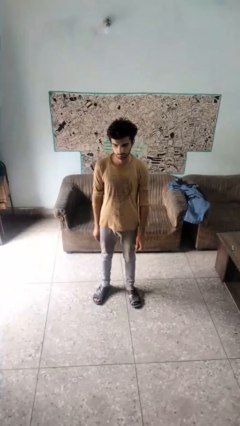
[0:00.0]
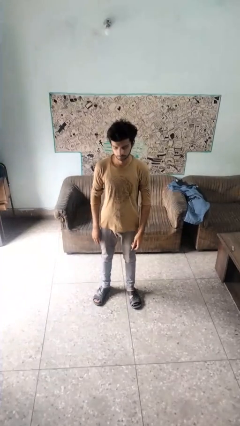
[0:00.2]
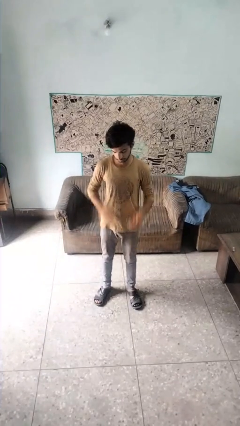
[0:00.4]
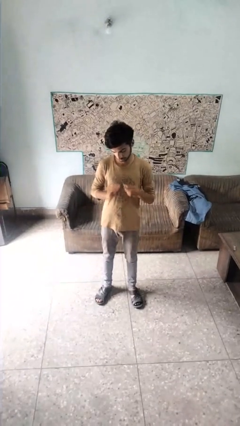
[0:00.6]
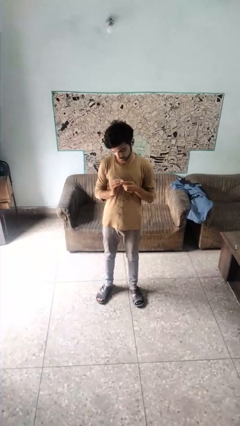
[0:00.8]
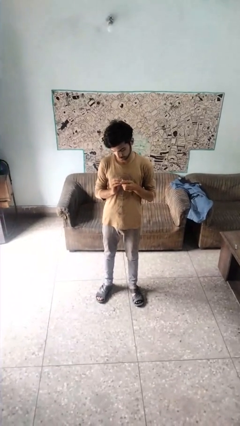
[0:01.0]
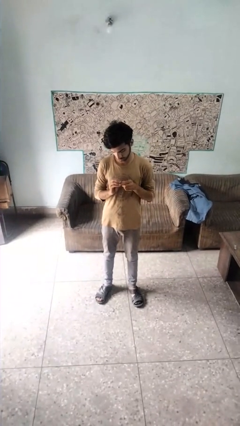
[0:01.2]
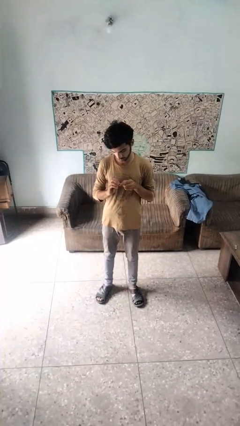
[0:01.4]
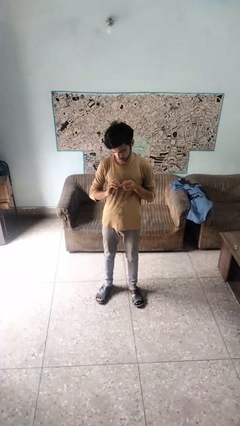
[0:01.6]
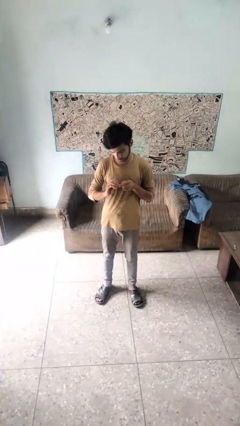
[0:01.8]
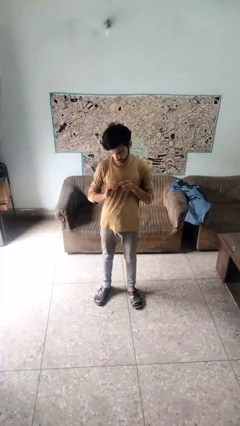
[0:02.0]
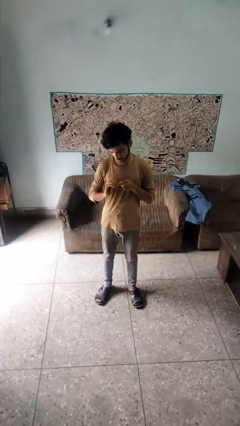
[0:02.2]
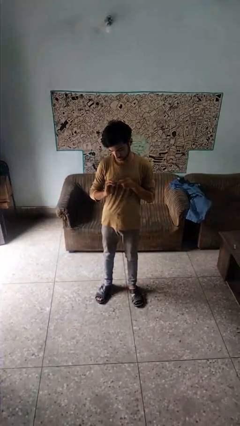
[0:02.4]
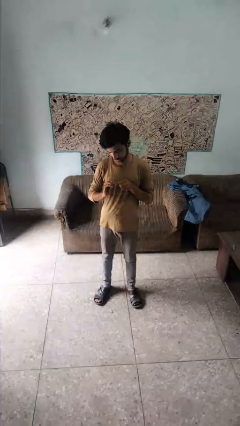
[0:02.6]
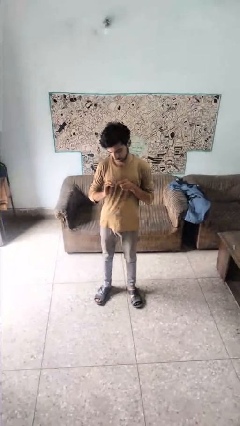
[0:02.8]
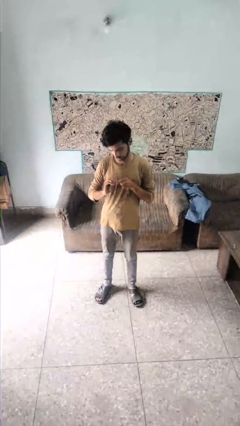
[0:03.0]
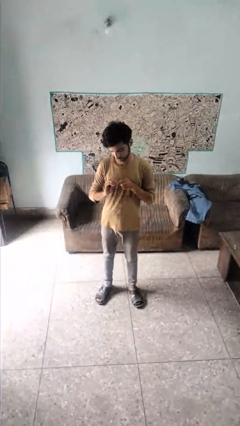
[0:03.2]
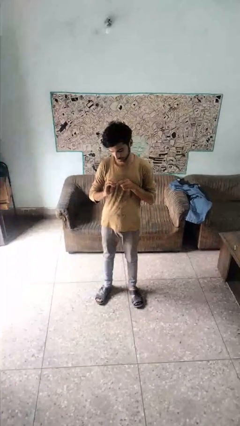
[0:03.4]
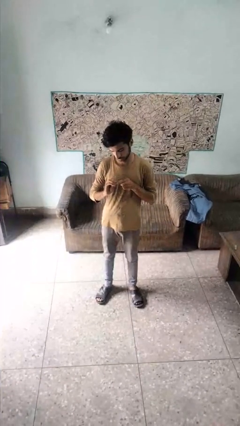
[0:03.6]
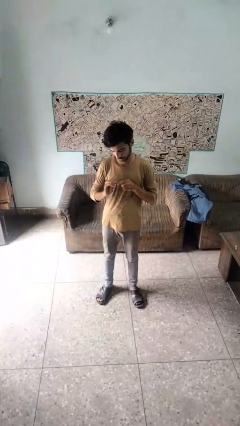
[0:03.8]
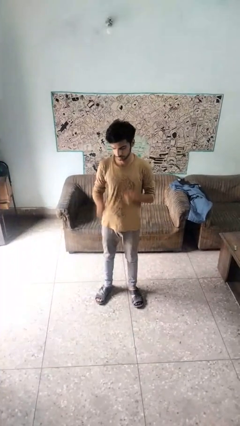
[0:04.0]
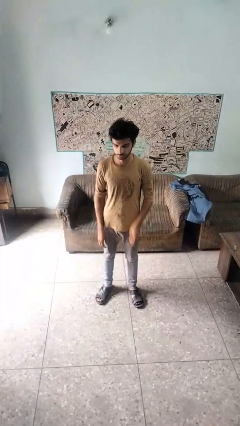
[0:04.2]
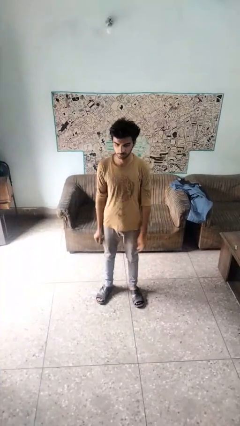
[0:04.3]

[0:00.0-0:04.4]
person files fingernails

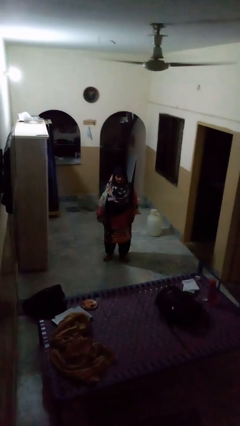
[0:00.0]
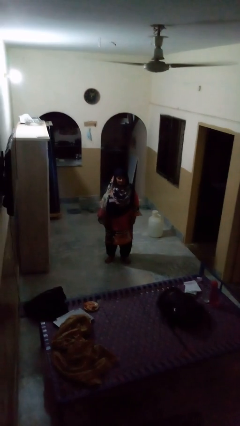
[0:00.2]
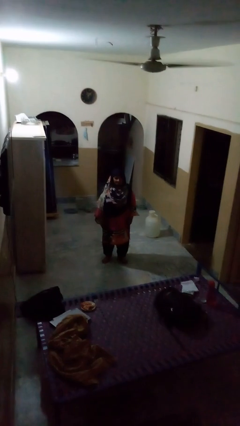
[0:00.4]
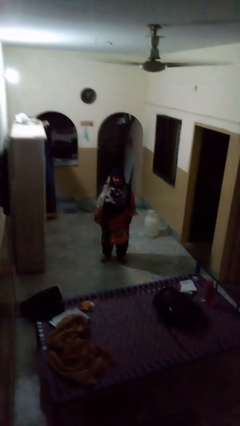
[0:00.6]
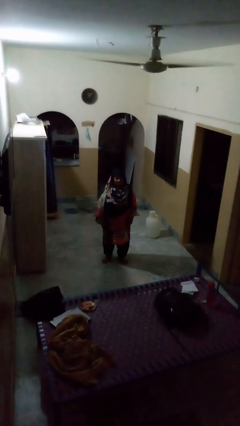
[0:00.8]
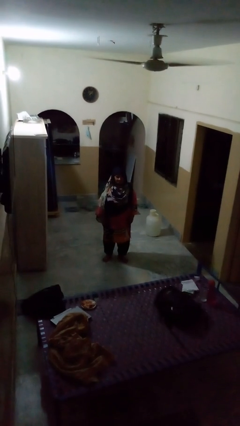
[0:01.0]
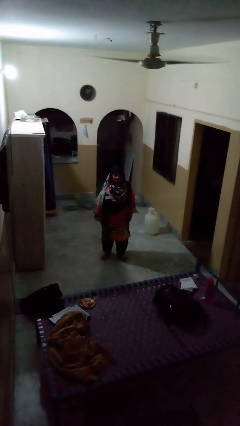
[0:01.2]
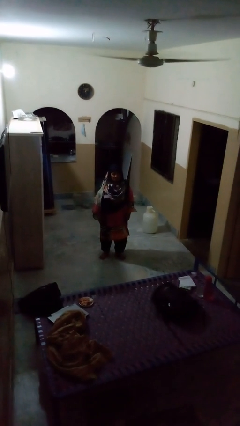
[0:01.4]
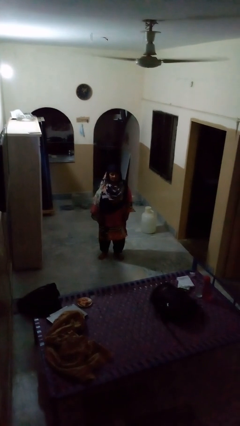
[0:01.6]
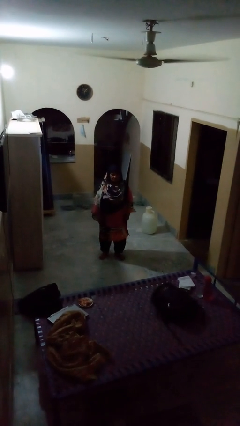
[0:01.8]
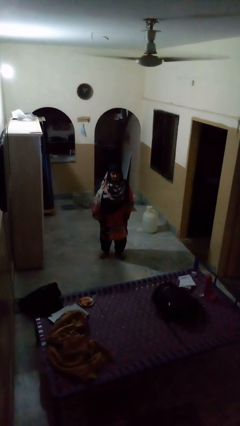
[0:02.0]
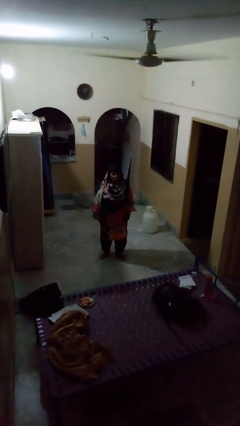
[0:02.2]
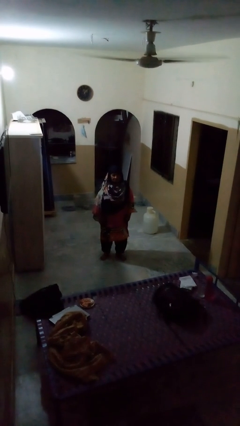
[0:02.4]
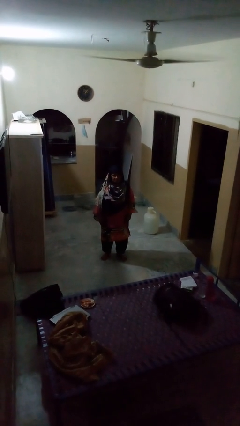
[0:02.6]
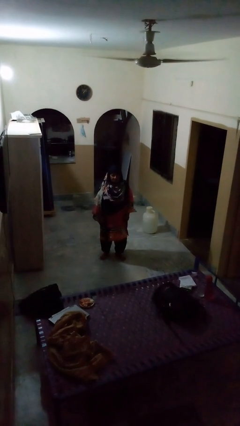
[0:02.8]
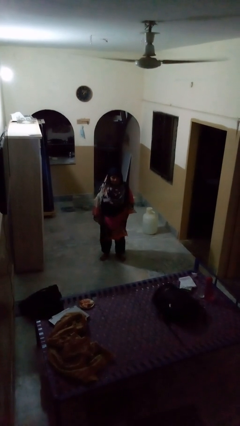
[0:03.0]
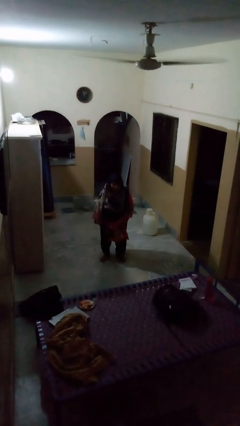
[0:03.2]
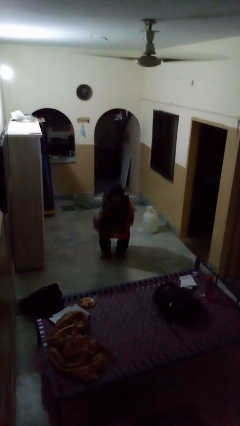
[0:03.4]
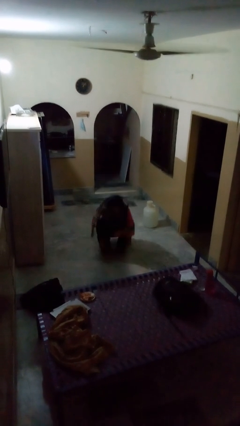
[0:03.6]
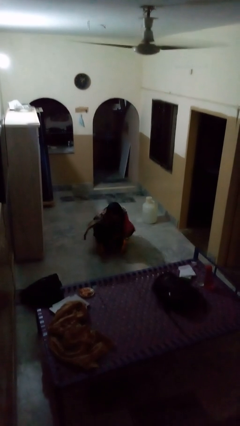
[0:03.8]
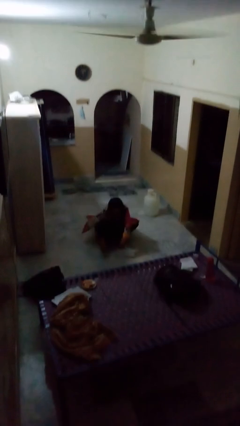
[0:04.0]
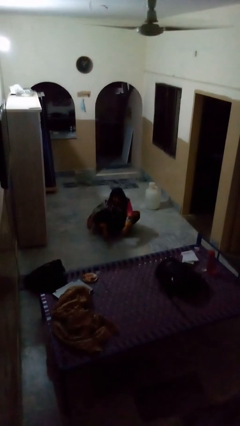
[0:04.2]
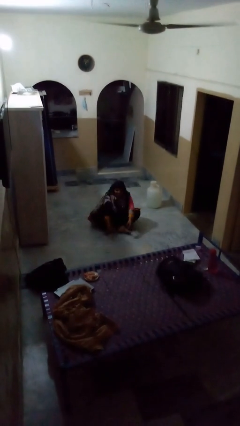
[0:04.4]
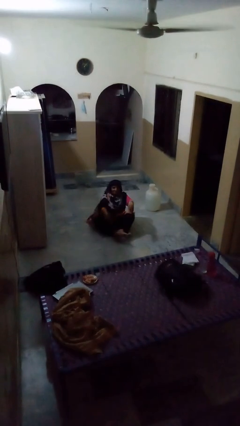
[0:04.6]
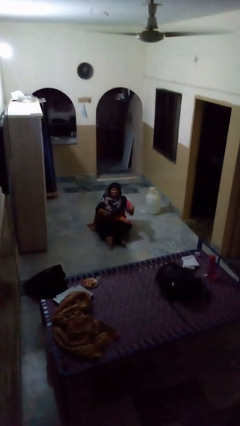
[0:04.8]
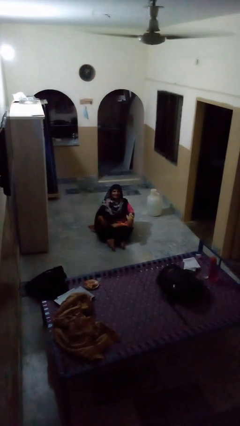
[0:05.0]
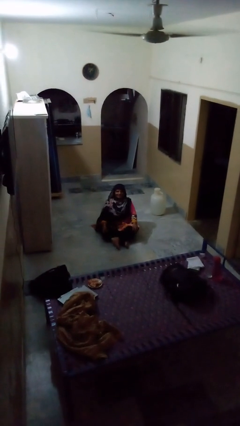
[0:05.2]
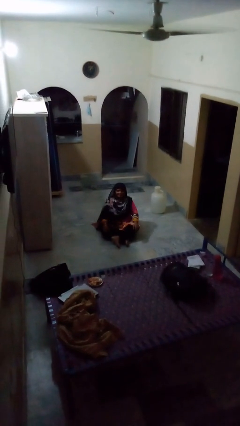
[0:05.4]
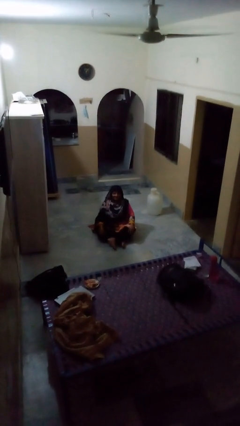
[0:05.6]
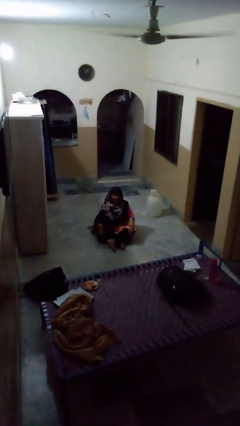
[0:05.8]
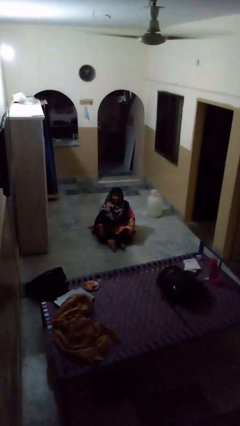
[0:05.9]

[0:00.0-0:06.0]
person sits crisscross

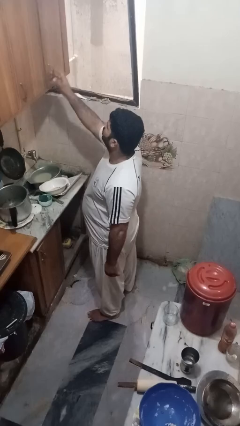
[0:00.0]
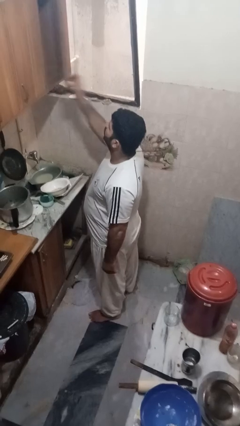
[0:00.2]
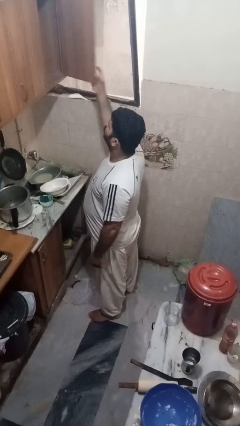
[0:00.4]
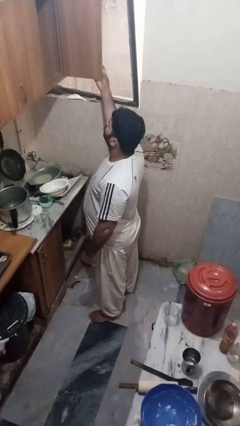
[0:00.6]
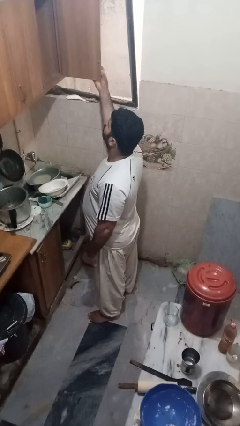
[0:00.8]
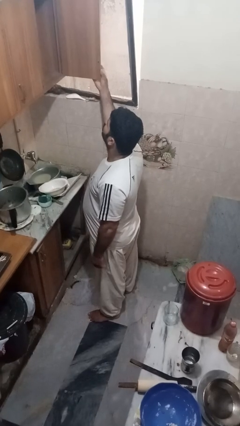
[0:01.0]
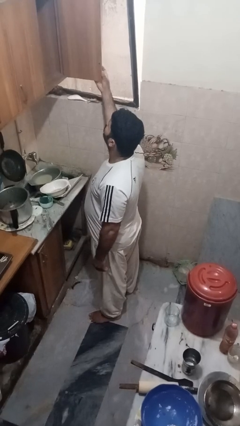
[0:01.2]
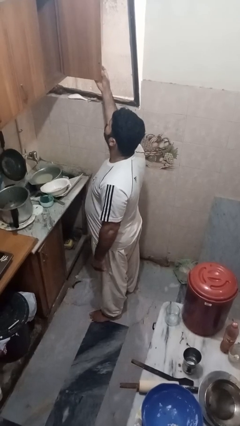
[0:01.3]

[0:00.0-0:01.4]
person opens cabinet

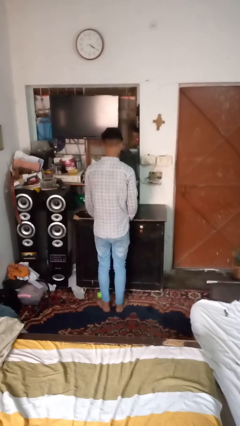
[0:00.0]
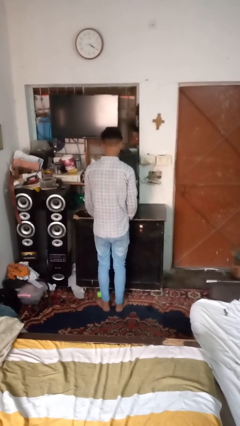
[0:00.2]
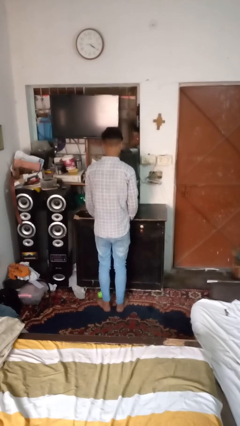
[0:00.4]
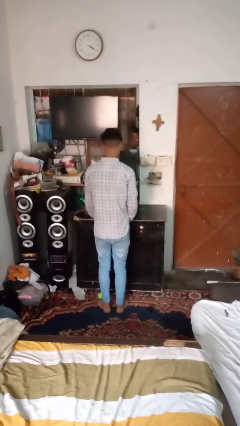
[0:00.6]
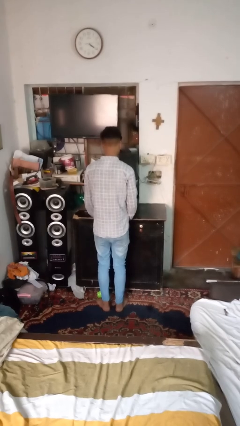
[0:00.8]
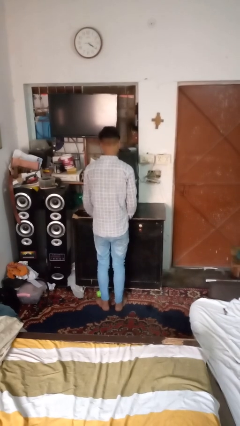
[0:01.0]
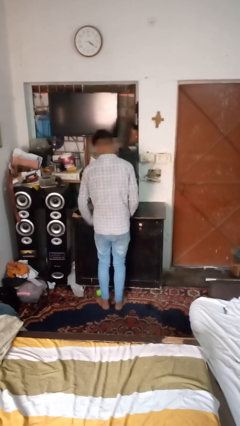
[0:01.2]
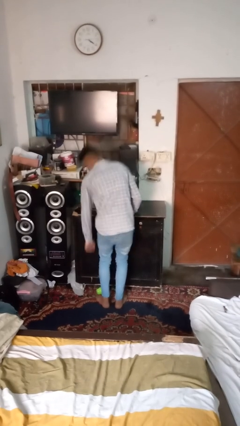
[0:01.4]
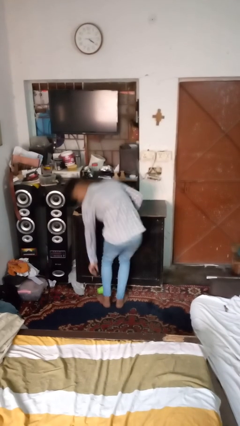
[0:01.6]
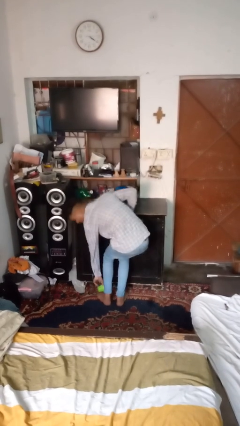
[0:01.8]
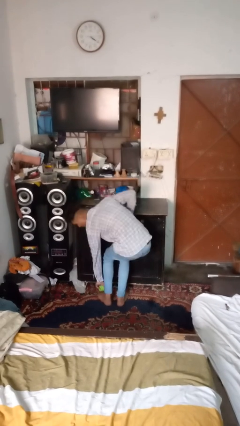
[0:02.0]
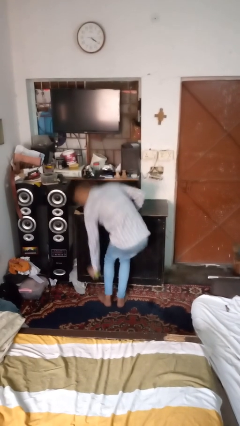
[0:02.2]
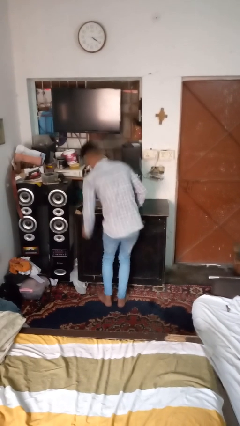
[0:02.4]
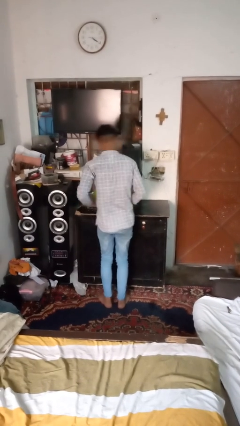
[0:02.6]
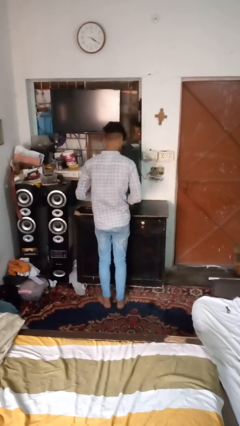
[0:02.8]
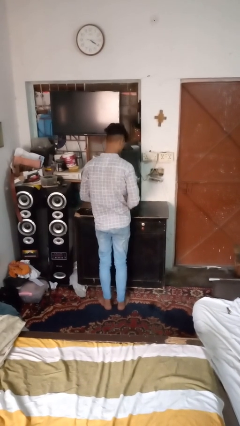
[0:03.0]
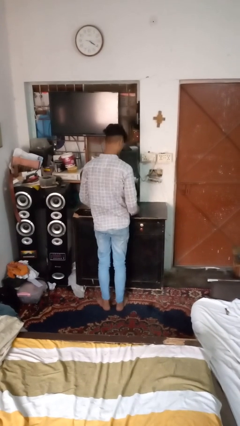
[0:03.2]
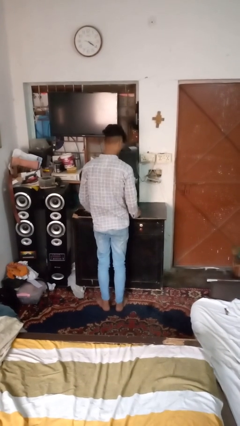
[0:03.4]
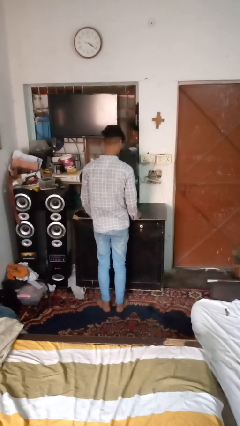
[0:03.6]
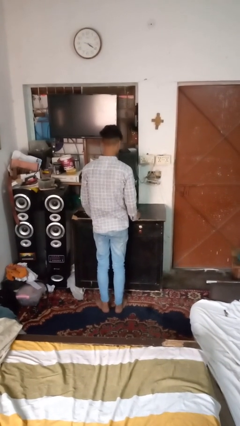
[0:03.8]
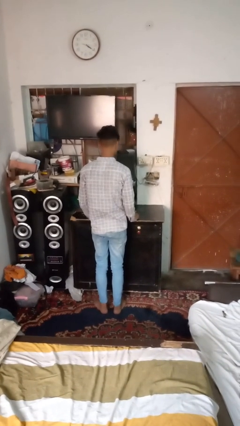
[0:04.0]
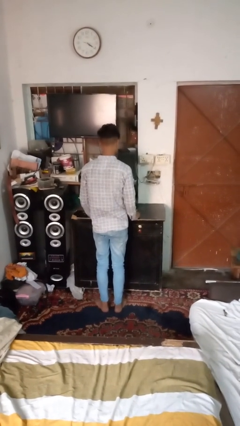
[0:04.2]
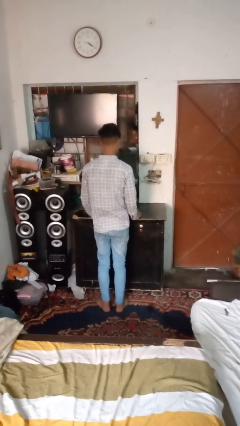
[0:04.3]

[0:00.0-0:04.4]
person sets upright glass

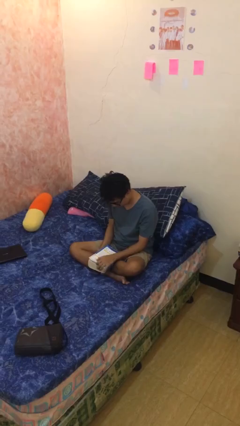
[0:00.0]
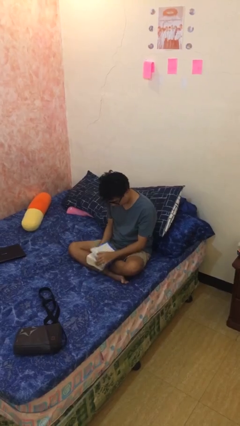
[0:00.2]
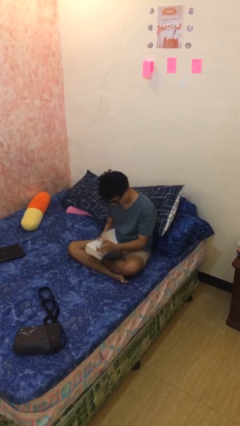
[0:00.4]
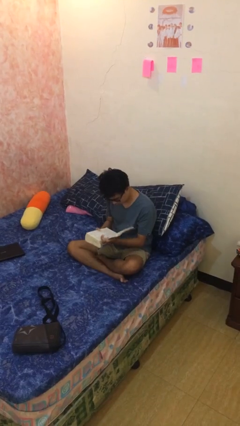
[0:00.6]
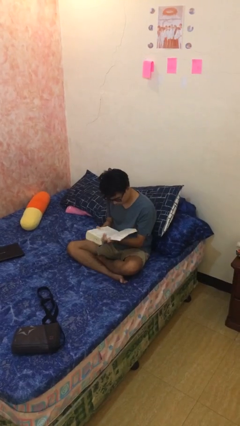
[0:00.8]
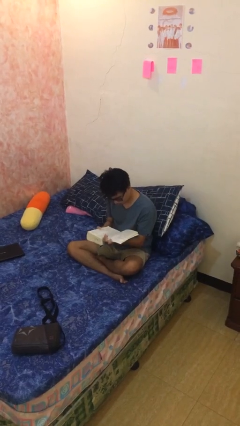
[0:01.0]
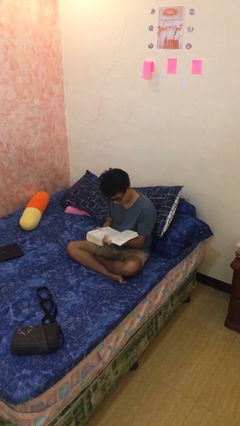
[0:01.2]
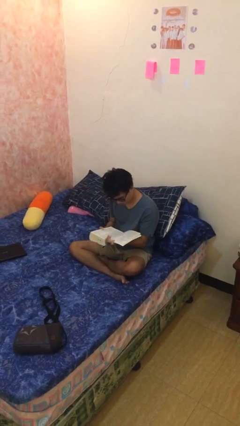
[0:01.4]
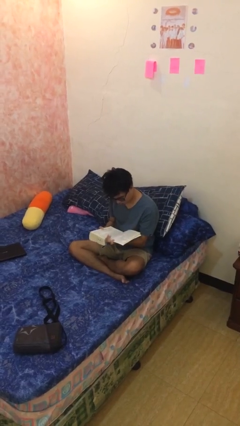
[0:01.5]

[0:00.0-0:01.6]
person reads document
